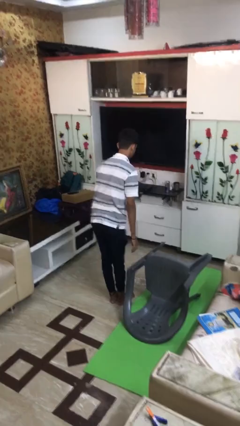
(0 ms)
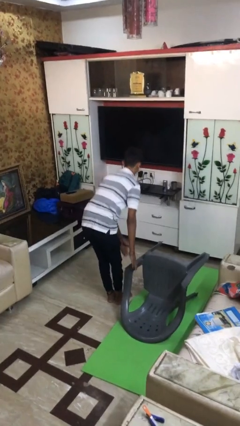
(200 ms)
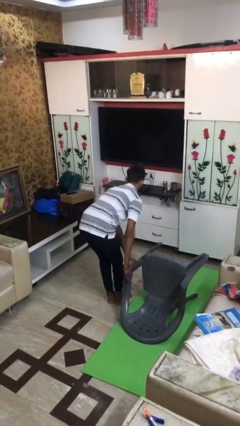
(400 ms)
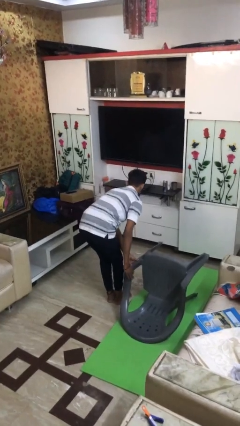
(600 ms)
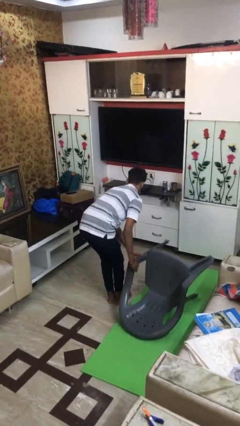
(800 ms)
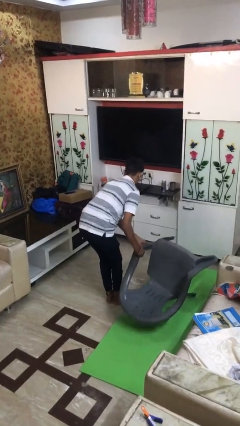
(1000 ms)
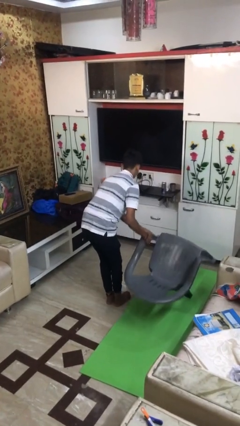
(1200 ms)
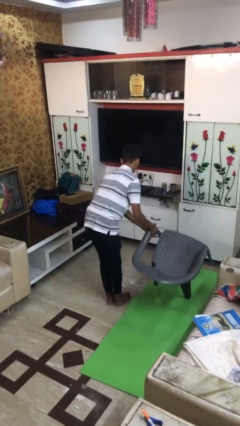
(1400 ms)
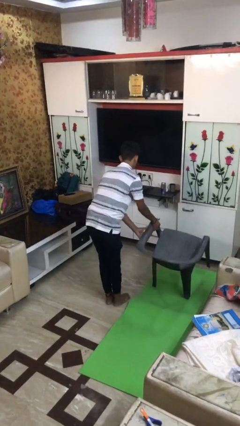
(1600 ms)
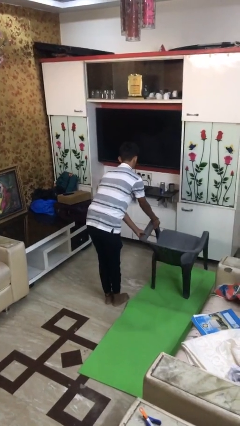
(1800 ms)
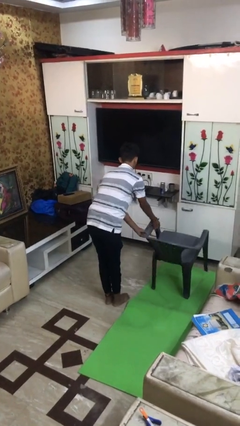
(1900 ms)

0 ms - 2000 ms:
person sets upright furniture

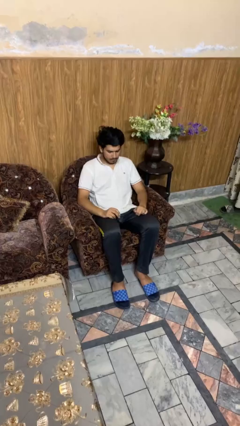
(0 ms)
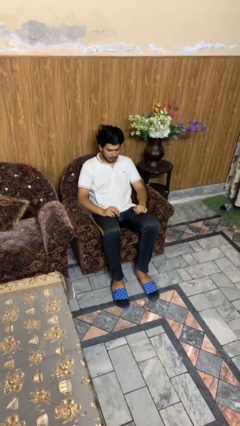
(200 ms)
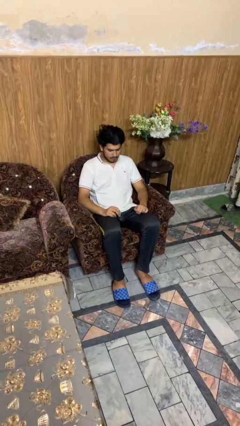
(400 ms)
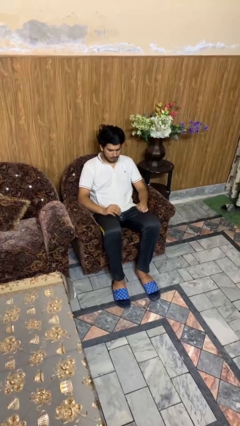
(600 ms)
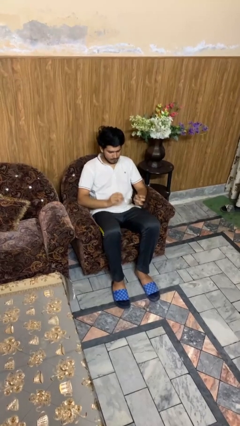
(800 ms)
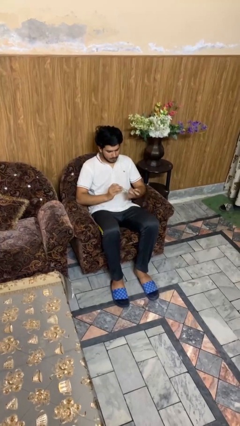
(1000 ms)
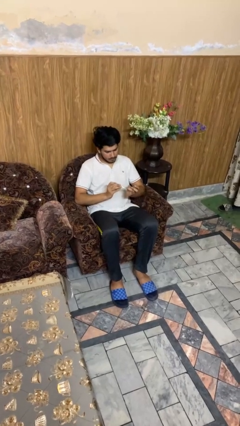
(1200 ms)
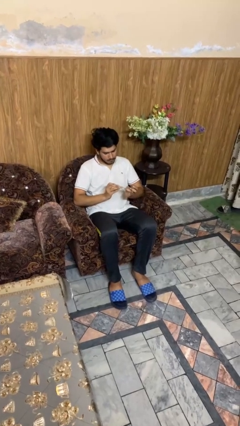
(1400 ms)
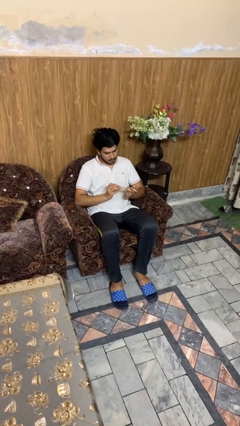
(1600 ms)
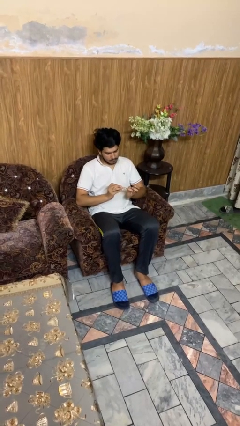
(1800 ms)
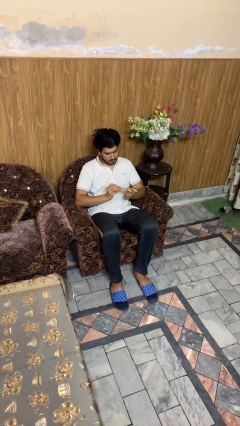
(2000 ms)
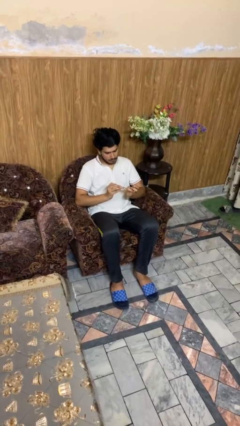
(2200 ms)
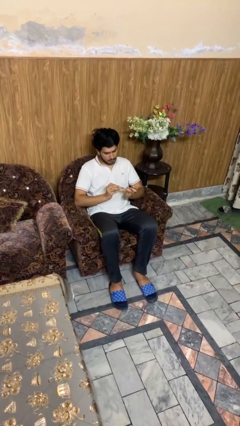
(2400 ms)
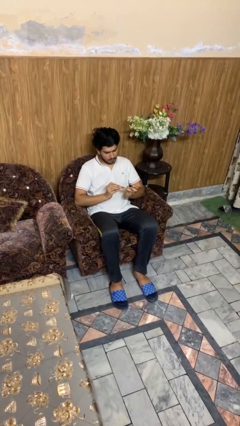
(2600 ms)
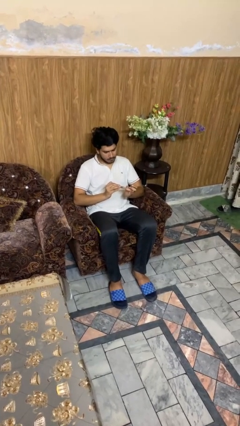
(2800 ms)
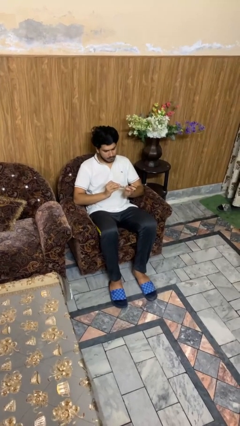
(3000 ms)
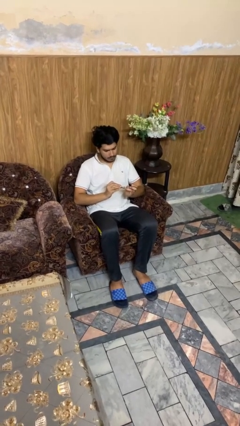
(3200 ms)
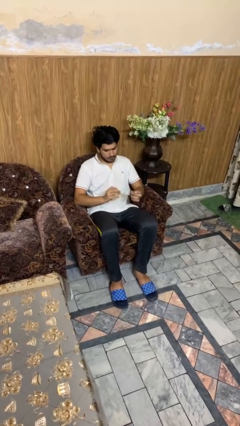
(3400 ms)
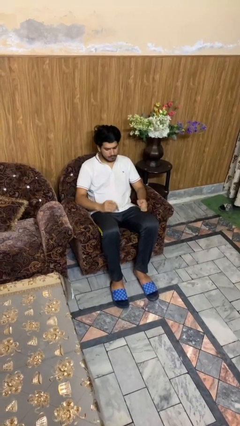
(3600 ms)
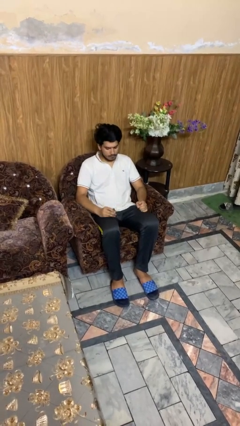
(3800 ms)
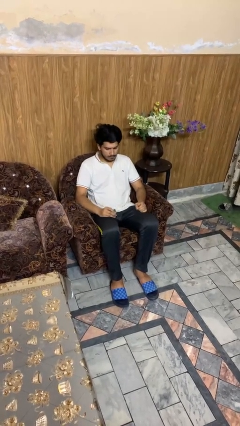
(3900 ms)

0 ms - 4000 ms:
person clips fingernails

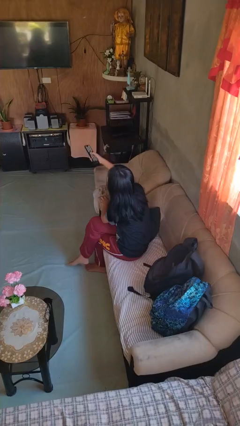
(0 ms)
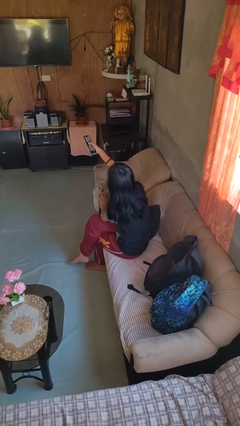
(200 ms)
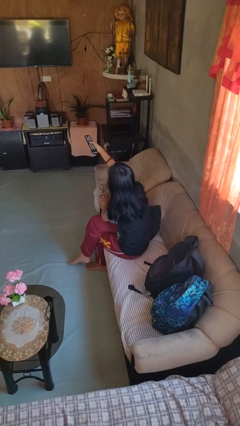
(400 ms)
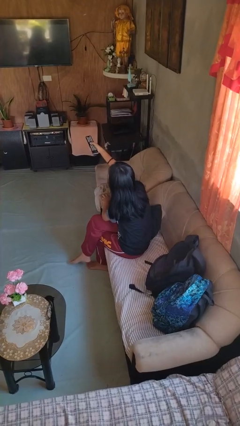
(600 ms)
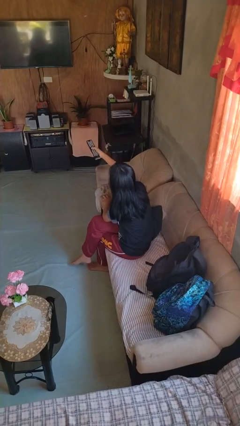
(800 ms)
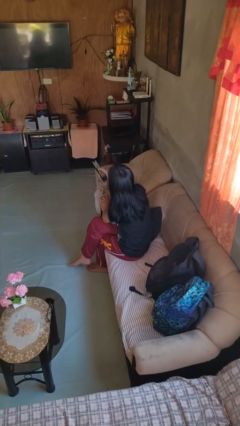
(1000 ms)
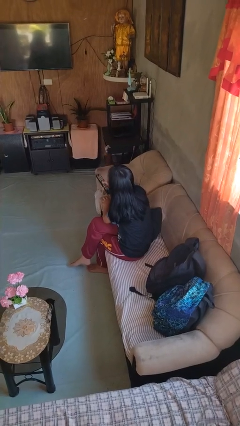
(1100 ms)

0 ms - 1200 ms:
person uses television remote

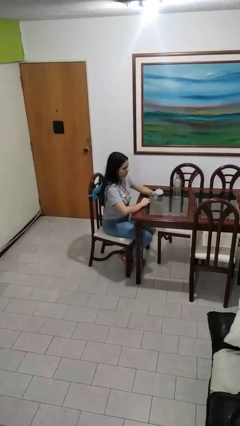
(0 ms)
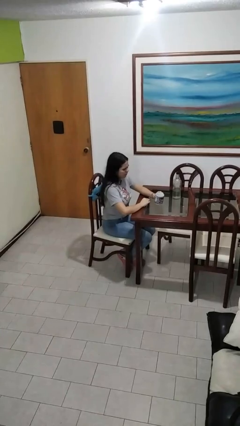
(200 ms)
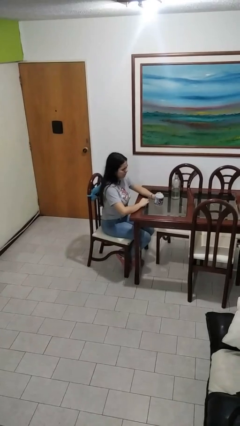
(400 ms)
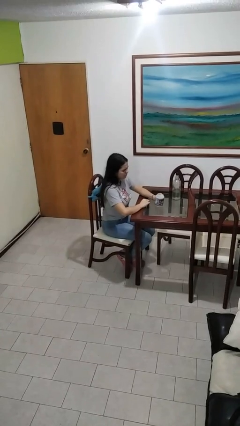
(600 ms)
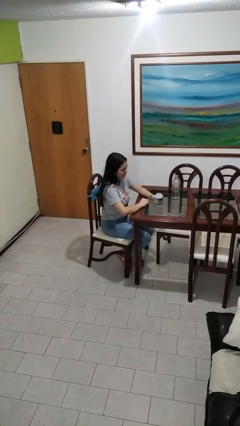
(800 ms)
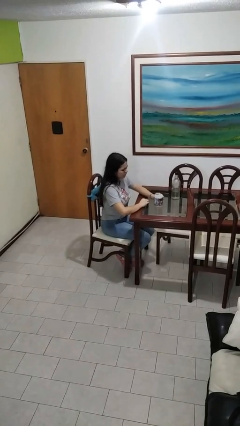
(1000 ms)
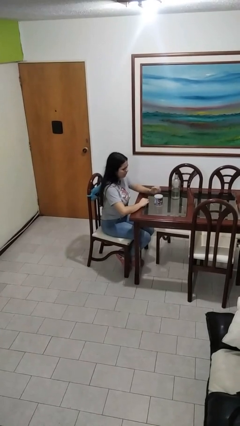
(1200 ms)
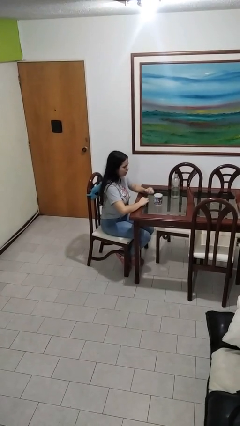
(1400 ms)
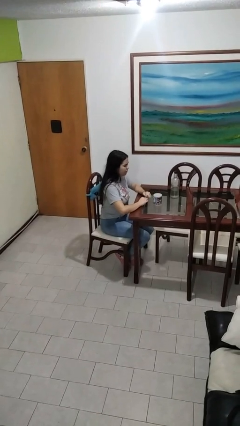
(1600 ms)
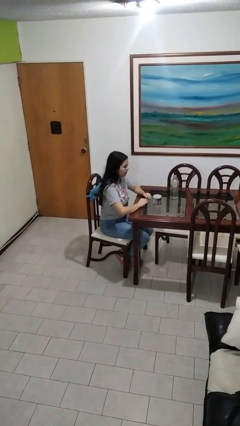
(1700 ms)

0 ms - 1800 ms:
person puts down object on table

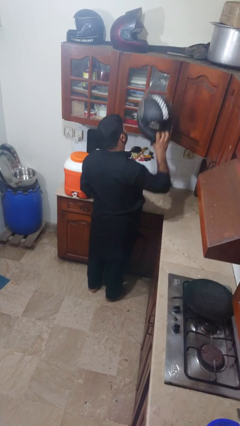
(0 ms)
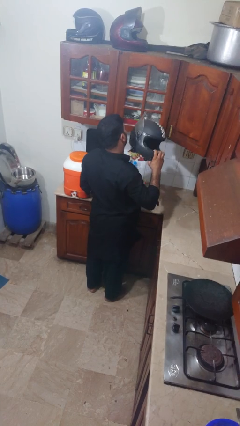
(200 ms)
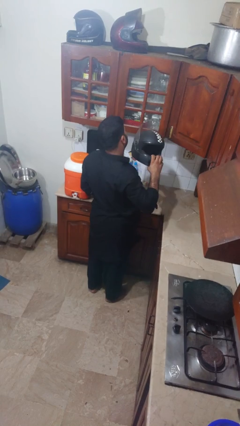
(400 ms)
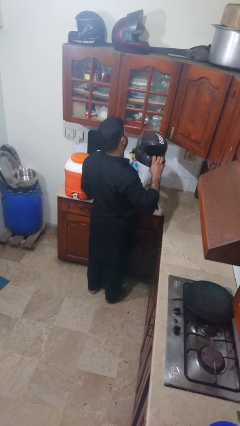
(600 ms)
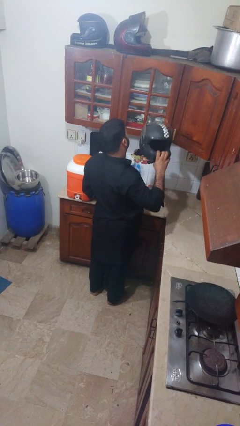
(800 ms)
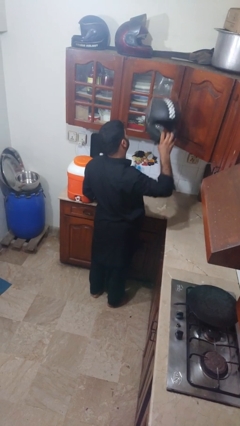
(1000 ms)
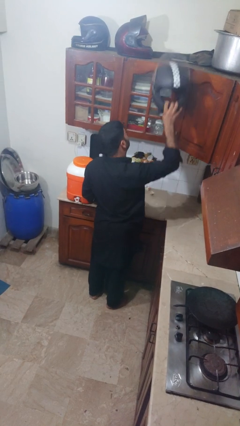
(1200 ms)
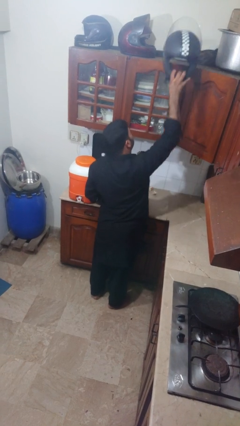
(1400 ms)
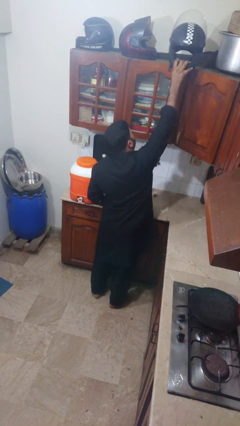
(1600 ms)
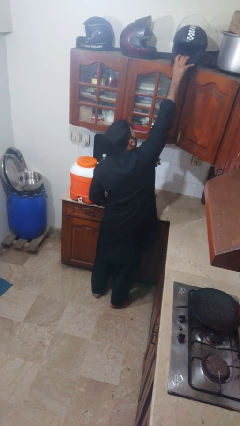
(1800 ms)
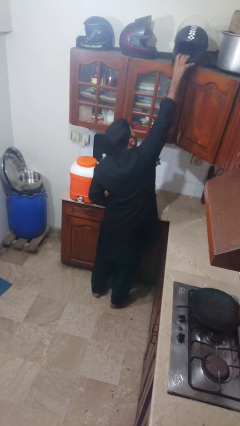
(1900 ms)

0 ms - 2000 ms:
person puts down object on shelf

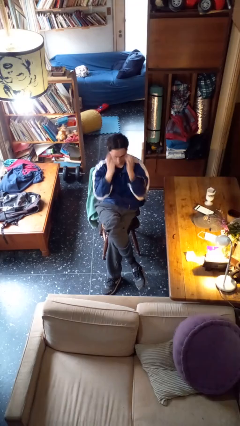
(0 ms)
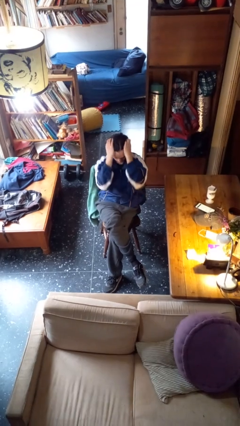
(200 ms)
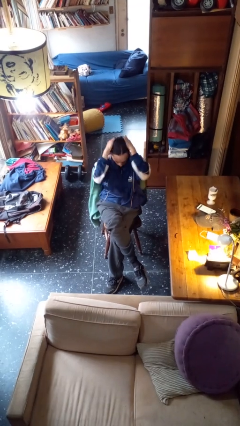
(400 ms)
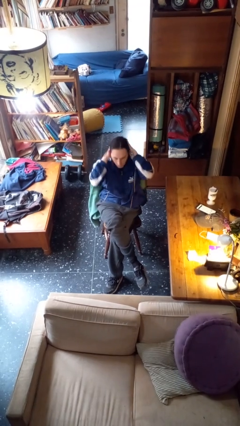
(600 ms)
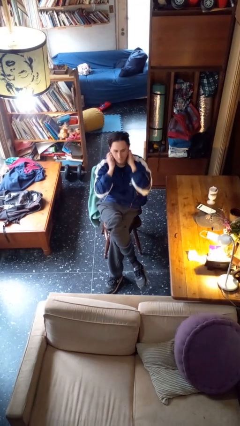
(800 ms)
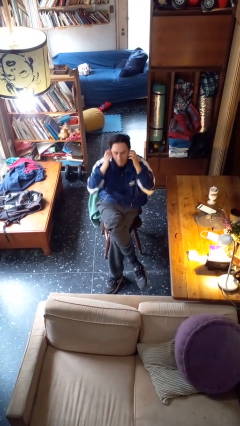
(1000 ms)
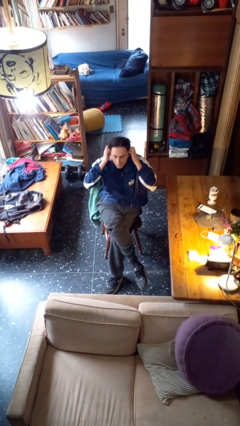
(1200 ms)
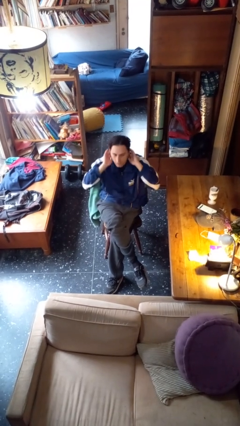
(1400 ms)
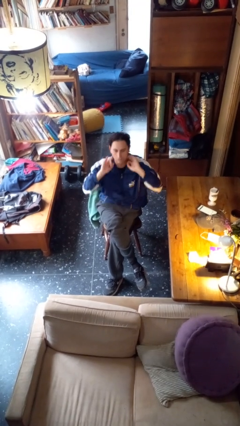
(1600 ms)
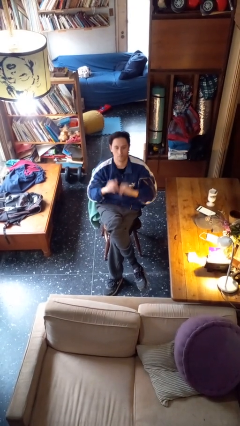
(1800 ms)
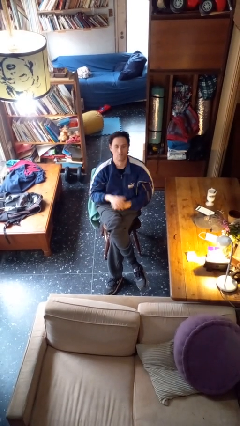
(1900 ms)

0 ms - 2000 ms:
person strokes hair

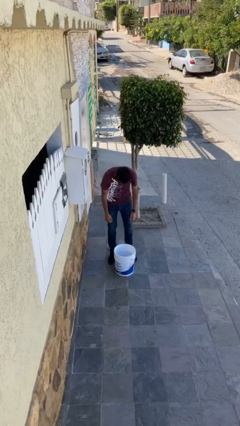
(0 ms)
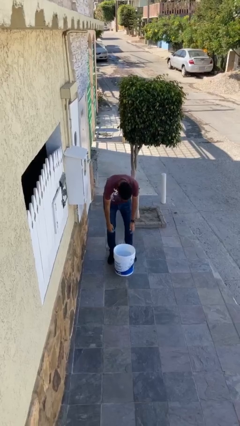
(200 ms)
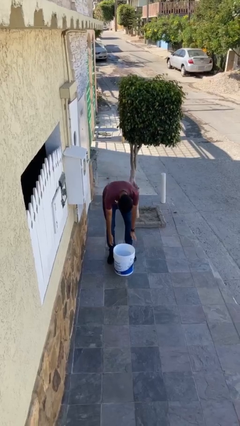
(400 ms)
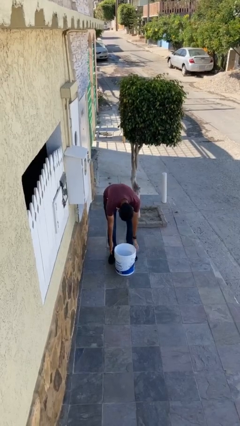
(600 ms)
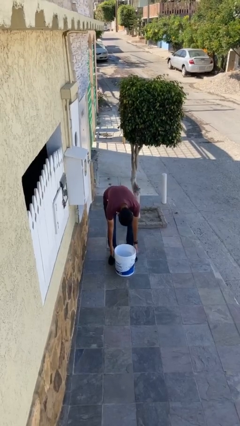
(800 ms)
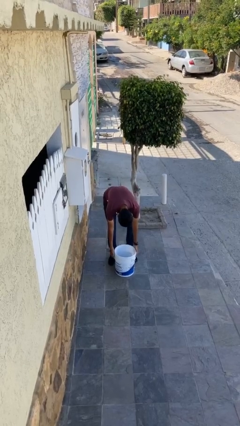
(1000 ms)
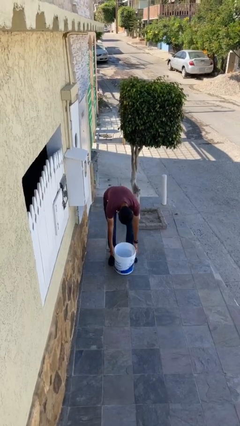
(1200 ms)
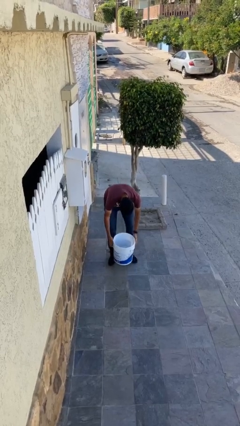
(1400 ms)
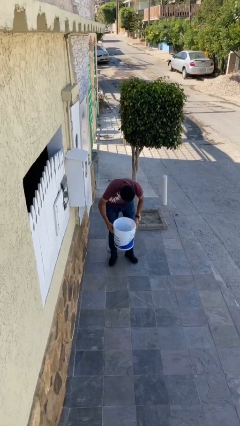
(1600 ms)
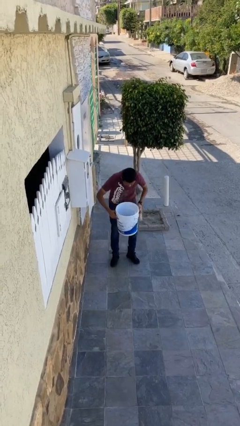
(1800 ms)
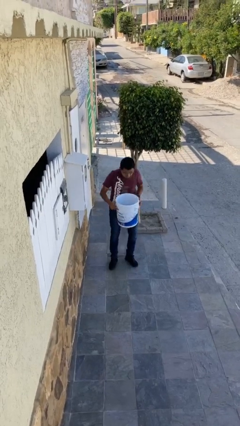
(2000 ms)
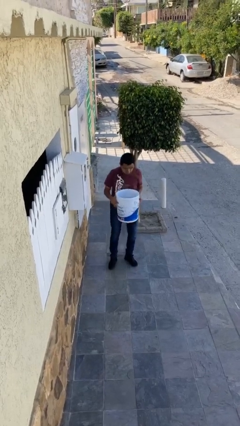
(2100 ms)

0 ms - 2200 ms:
person picks up object from floor

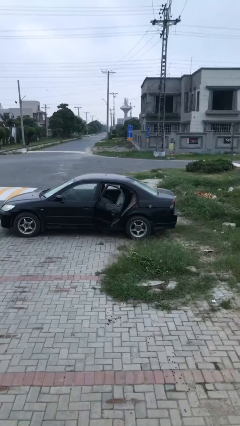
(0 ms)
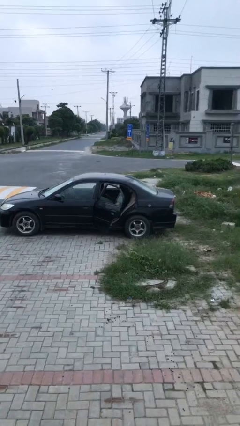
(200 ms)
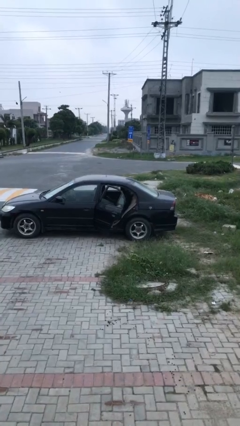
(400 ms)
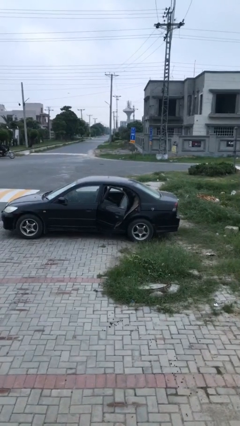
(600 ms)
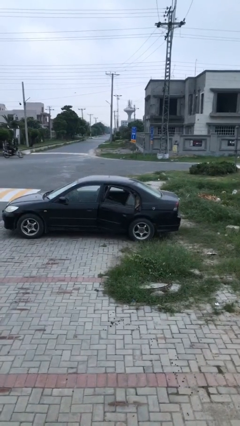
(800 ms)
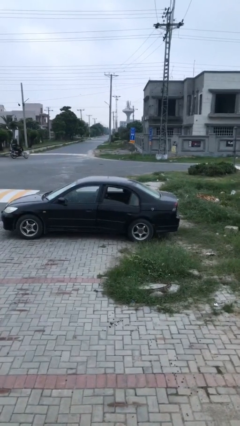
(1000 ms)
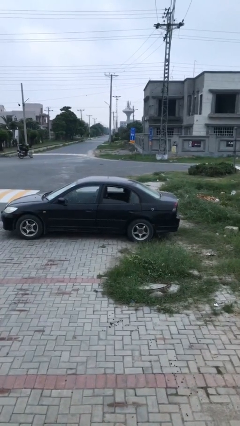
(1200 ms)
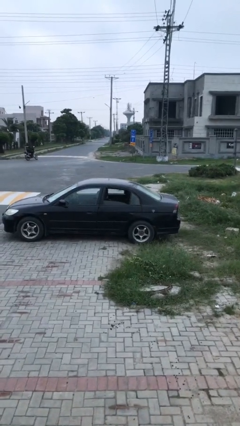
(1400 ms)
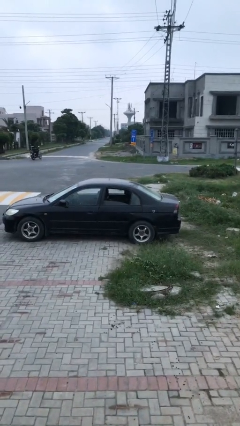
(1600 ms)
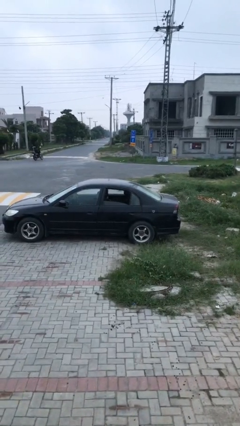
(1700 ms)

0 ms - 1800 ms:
person closes car door
